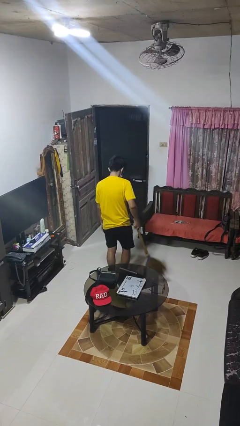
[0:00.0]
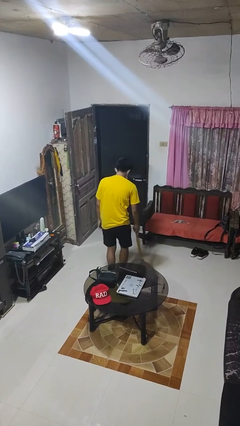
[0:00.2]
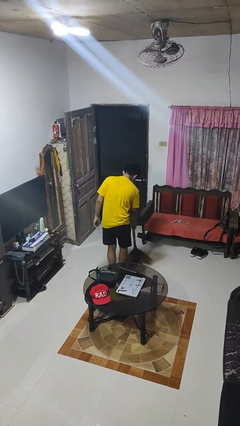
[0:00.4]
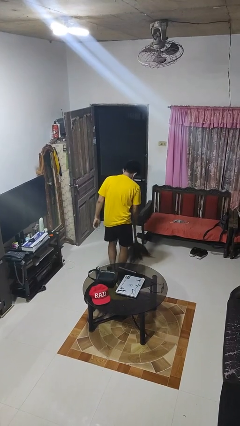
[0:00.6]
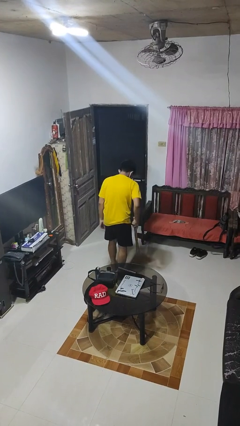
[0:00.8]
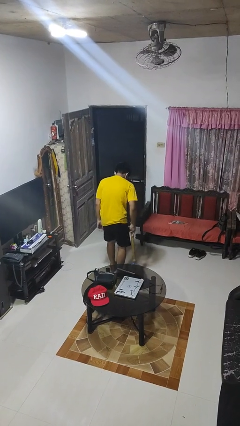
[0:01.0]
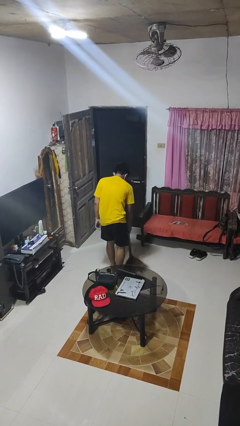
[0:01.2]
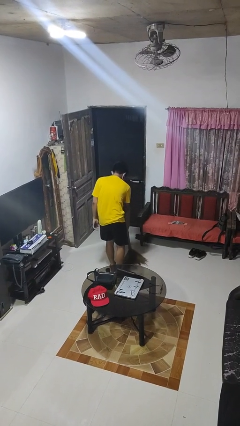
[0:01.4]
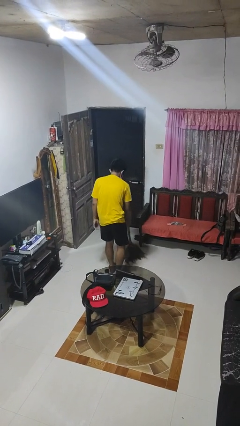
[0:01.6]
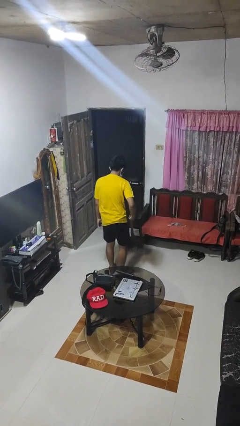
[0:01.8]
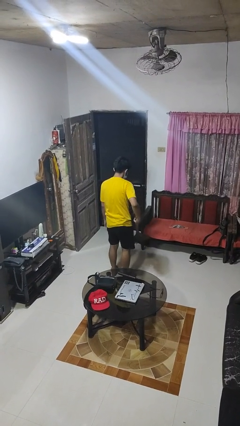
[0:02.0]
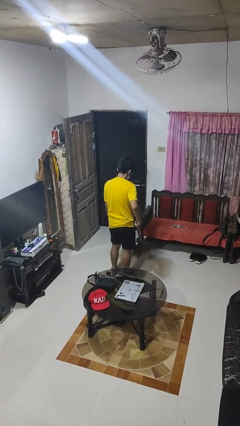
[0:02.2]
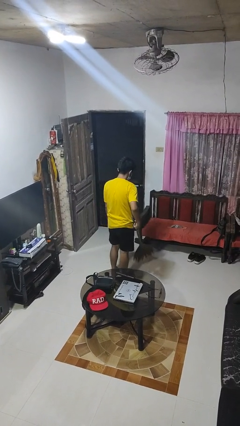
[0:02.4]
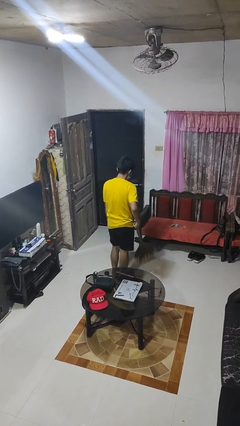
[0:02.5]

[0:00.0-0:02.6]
person sweeps floor

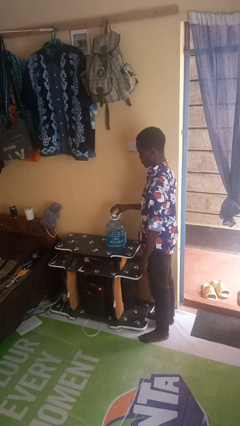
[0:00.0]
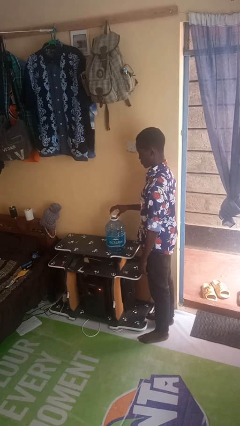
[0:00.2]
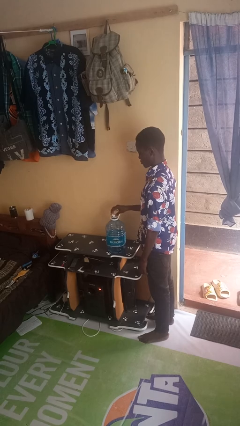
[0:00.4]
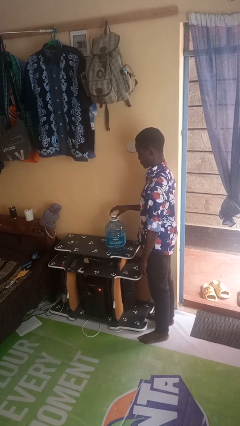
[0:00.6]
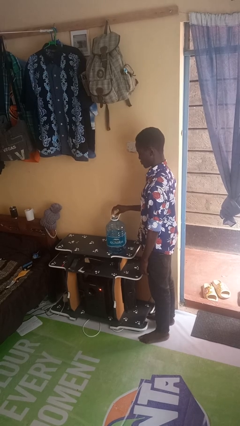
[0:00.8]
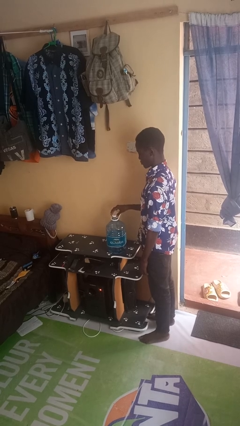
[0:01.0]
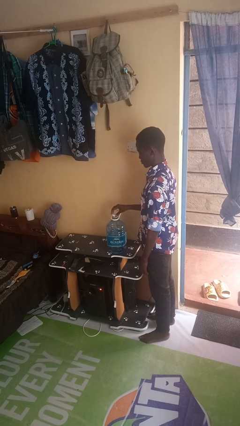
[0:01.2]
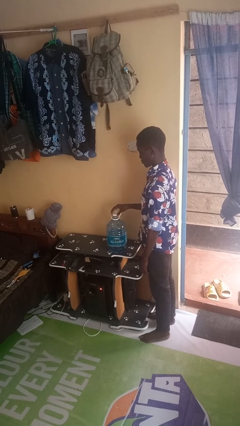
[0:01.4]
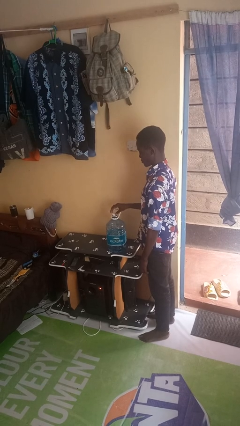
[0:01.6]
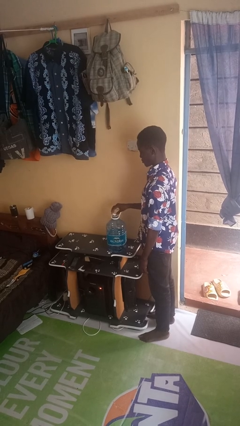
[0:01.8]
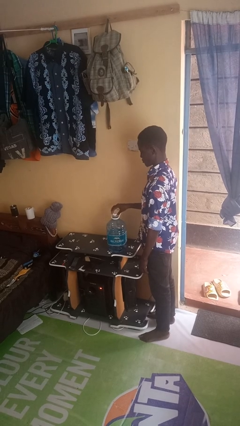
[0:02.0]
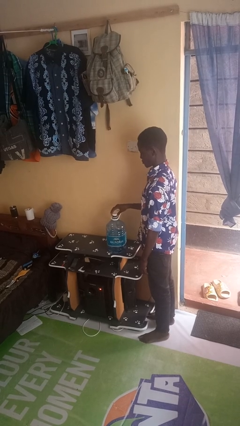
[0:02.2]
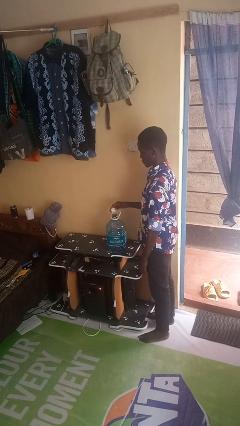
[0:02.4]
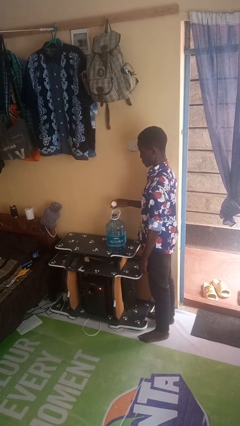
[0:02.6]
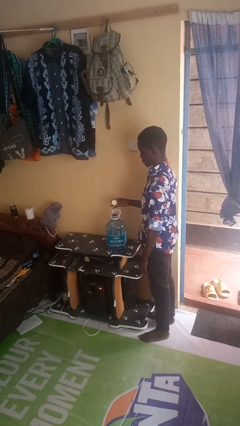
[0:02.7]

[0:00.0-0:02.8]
person unscrews lid from bottle

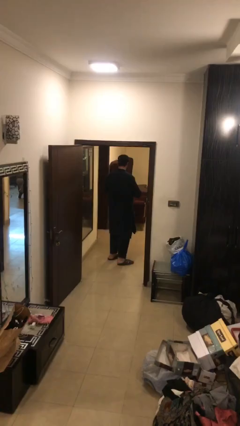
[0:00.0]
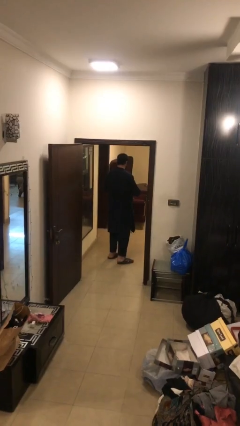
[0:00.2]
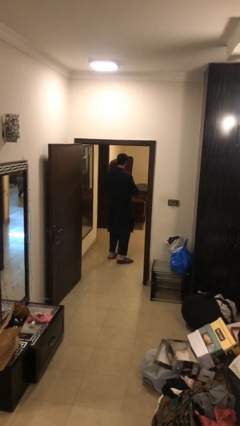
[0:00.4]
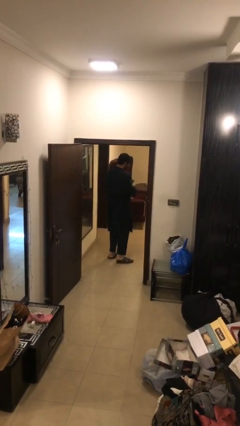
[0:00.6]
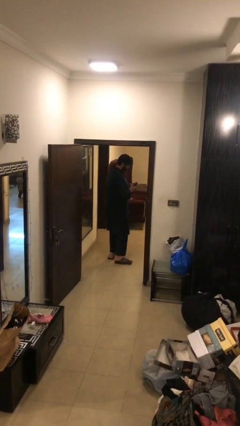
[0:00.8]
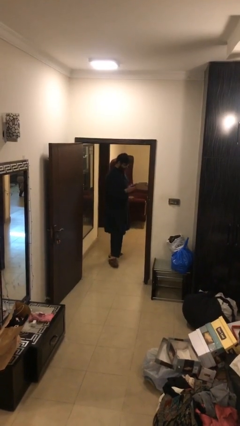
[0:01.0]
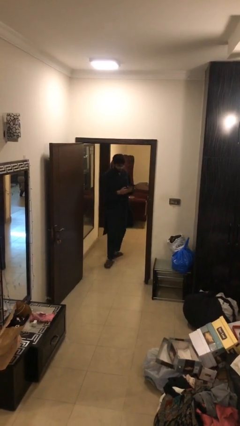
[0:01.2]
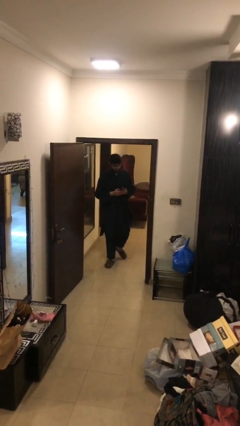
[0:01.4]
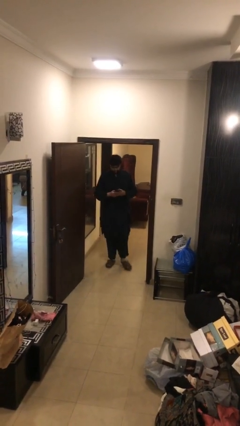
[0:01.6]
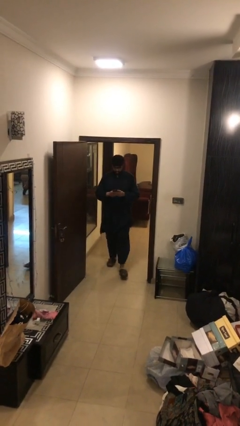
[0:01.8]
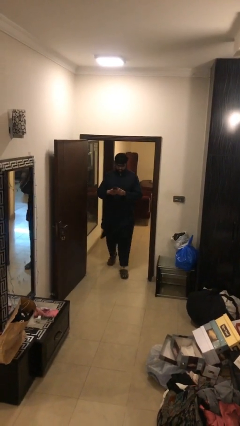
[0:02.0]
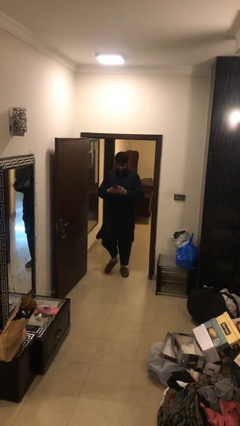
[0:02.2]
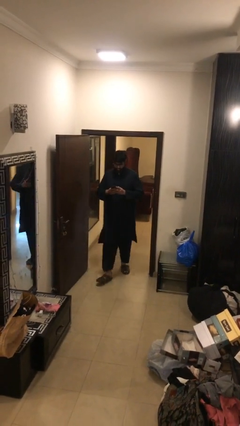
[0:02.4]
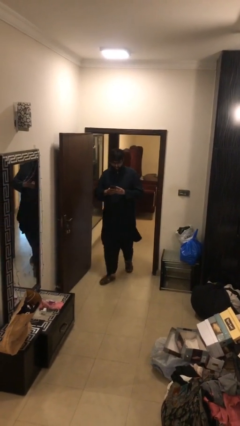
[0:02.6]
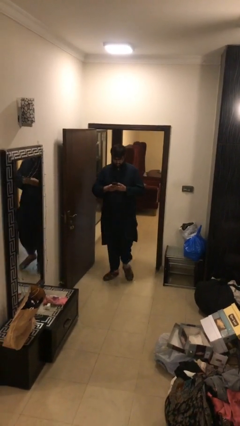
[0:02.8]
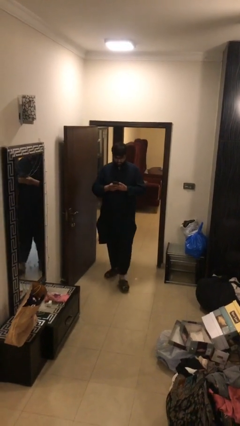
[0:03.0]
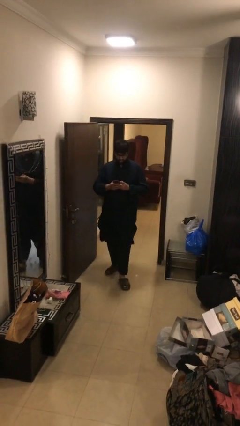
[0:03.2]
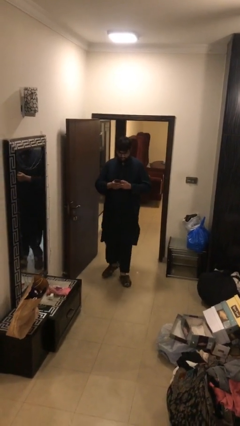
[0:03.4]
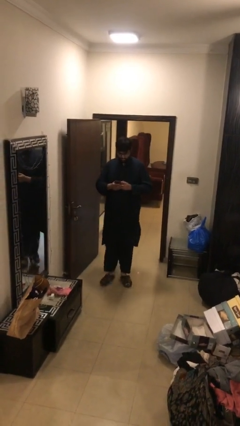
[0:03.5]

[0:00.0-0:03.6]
person enters scene through structure

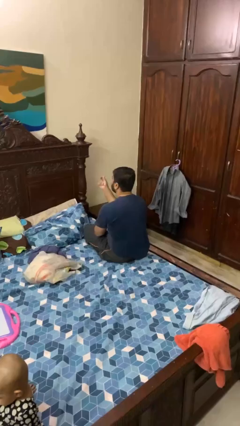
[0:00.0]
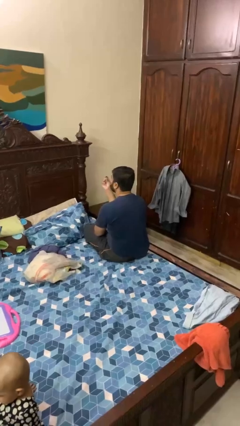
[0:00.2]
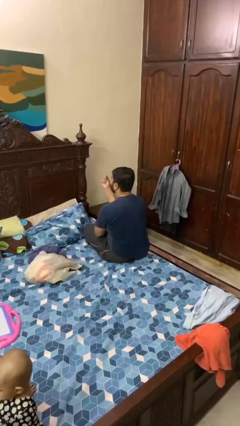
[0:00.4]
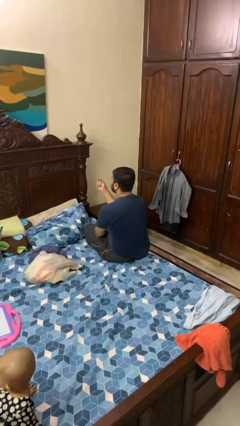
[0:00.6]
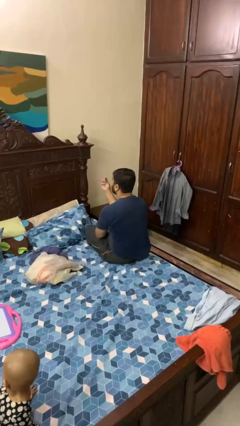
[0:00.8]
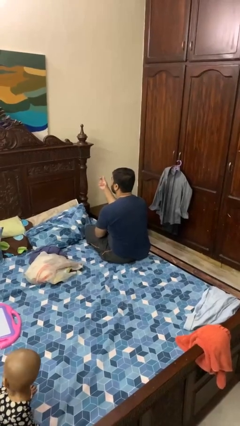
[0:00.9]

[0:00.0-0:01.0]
person snaps fingers

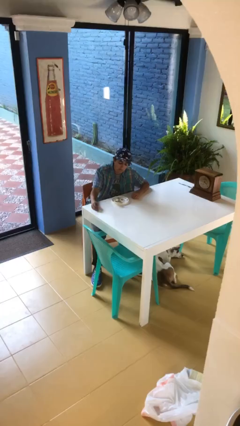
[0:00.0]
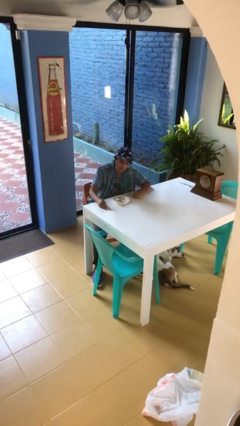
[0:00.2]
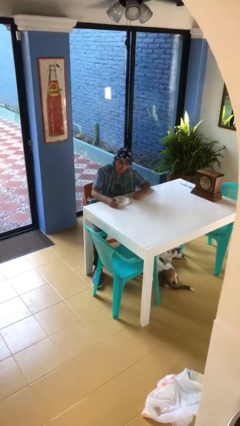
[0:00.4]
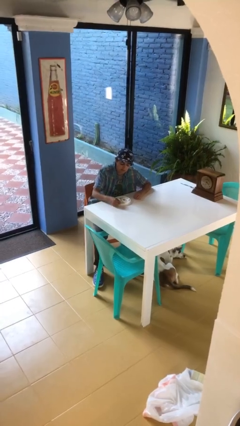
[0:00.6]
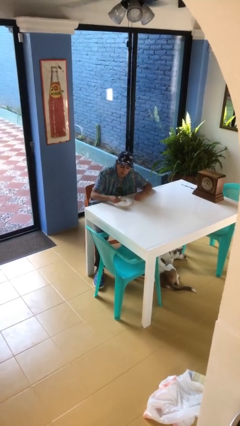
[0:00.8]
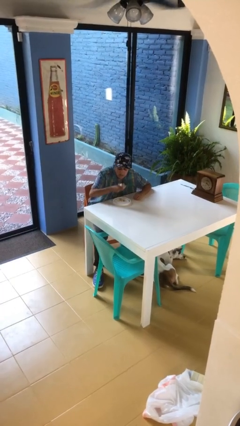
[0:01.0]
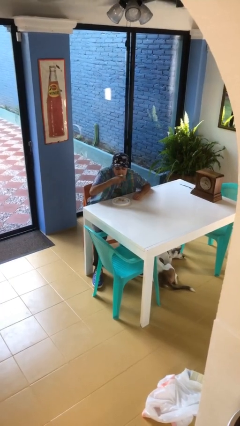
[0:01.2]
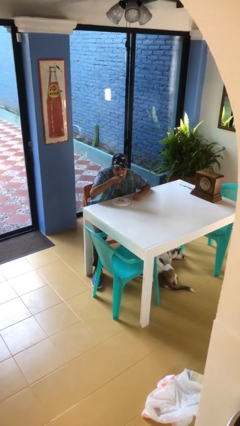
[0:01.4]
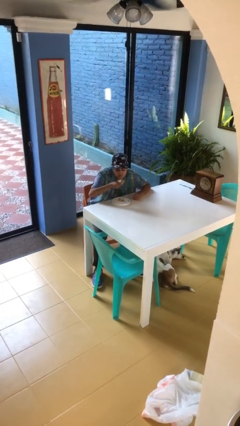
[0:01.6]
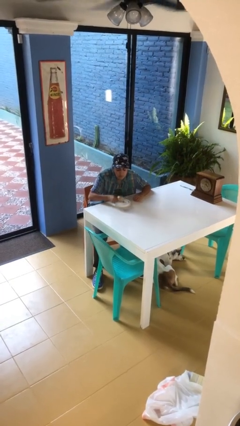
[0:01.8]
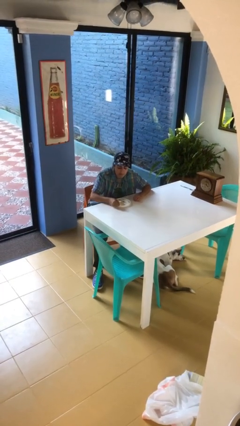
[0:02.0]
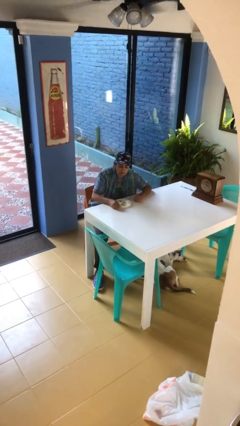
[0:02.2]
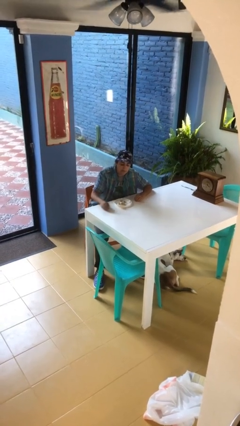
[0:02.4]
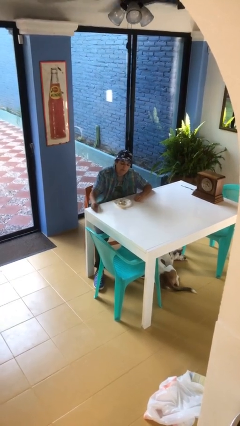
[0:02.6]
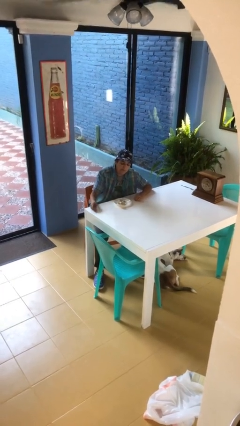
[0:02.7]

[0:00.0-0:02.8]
person eats with hands

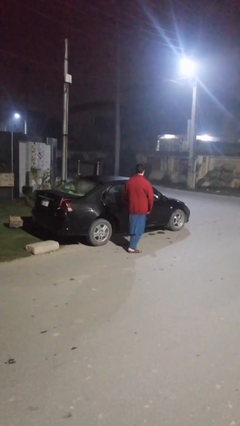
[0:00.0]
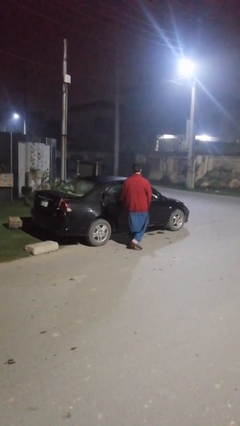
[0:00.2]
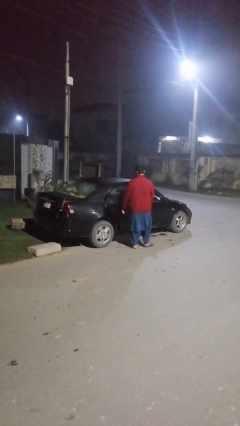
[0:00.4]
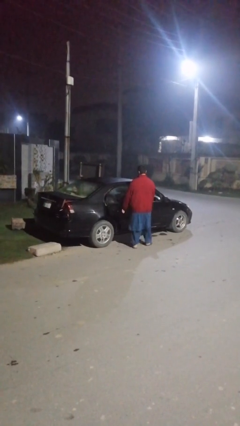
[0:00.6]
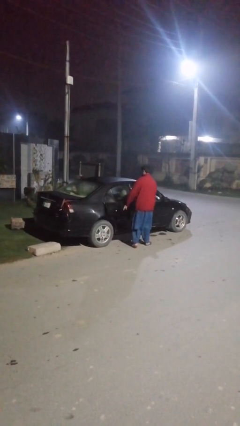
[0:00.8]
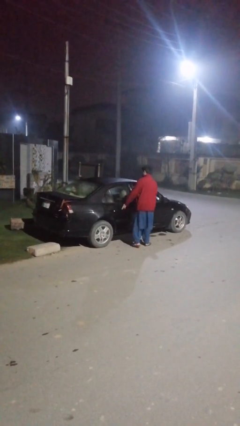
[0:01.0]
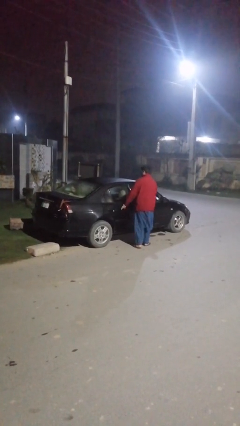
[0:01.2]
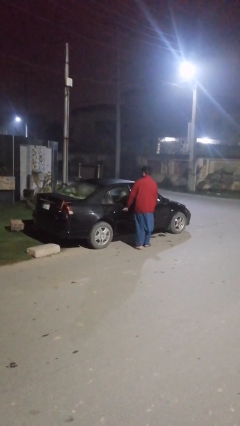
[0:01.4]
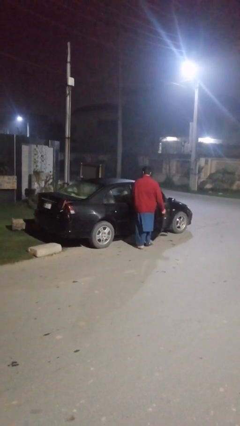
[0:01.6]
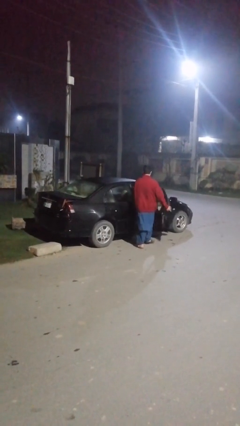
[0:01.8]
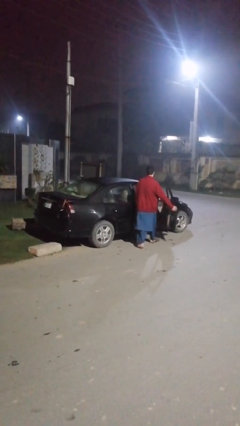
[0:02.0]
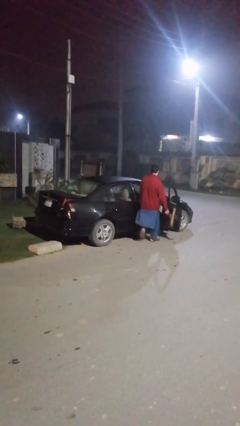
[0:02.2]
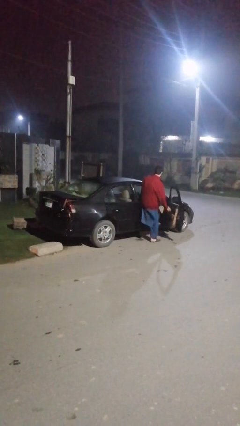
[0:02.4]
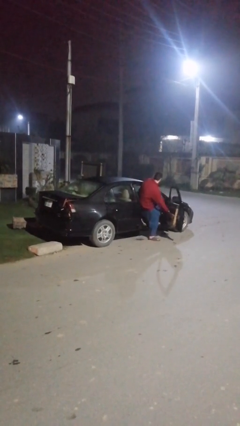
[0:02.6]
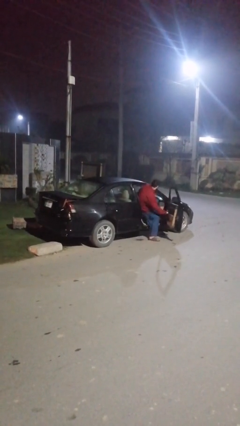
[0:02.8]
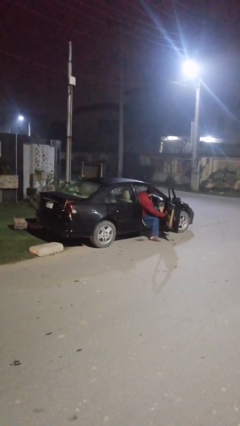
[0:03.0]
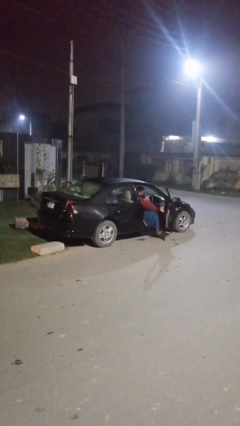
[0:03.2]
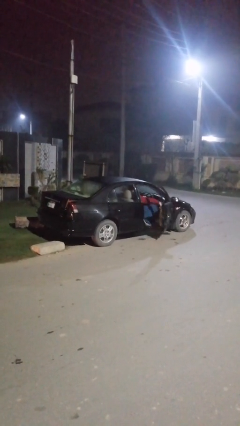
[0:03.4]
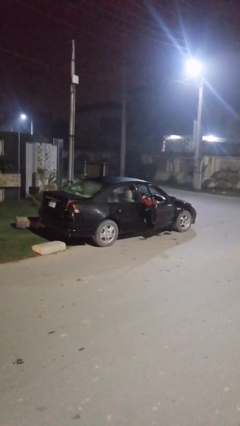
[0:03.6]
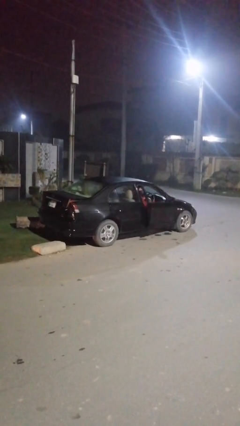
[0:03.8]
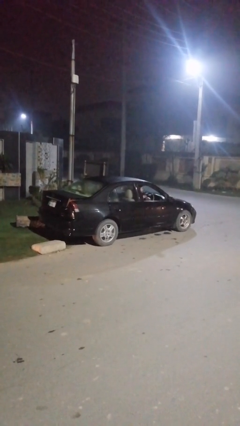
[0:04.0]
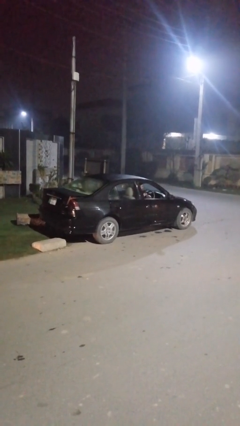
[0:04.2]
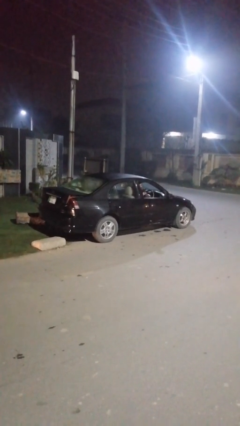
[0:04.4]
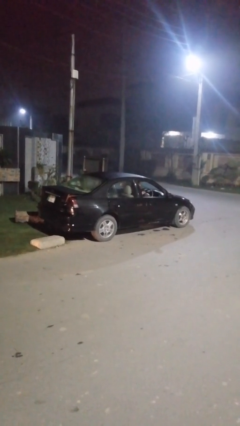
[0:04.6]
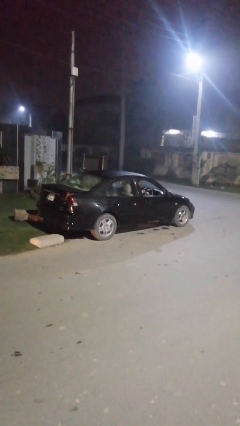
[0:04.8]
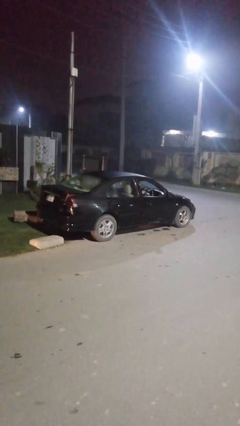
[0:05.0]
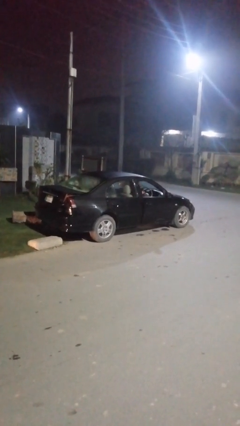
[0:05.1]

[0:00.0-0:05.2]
car picks up person
